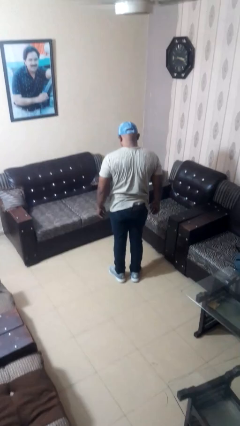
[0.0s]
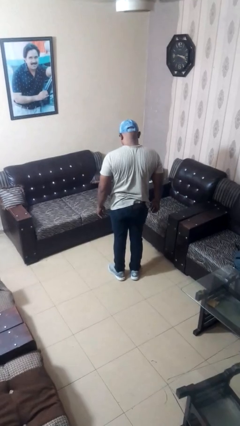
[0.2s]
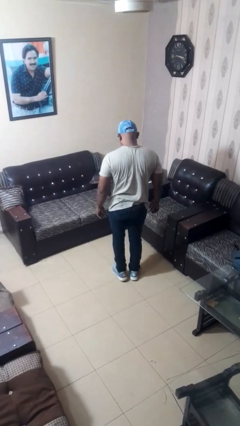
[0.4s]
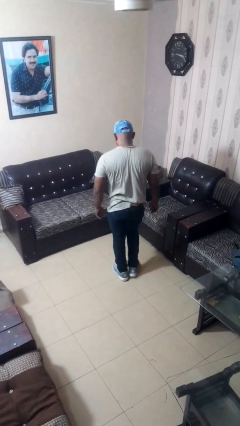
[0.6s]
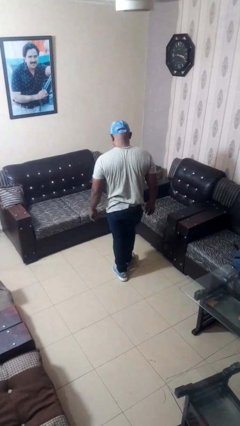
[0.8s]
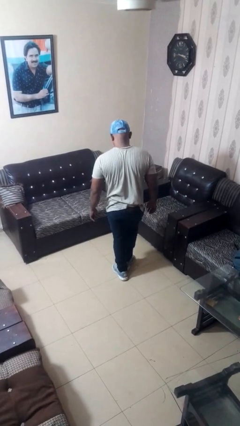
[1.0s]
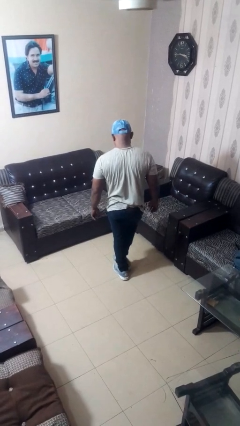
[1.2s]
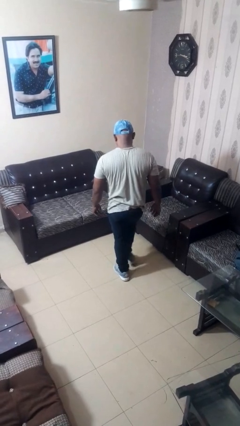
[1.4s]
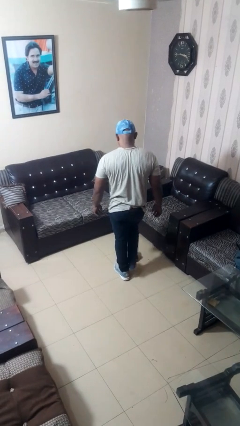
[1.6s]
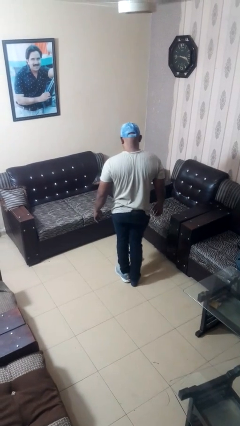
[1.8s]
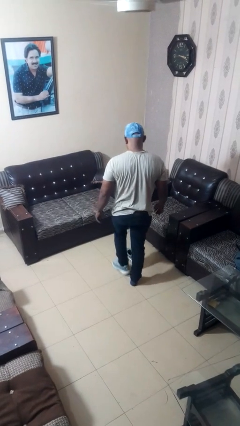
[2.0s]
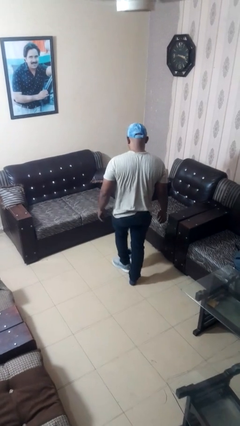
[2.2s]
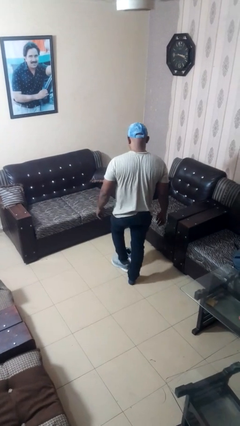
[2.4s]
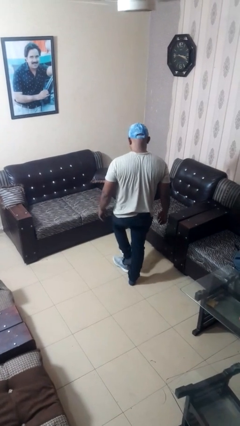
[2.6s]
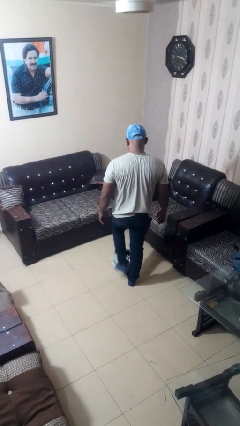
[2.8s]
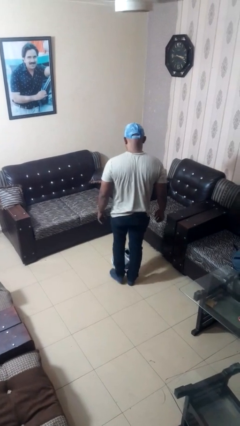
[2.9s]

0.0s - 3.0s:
person takes off shoes

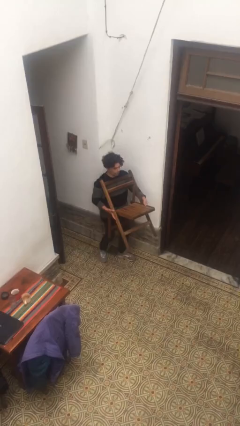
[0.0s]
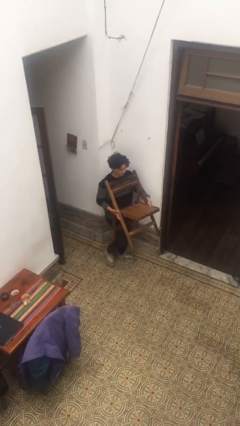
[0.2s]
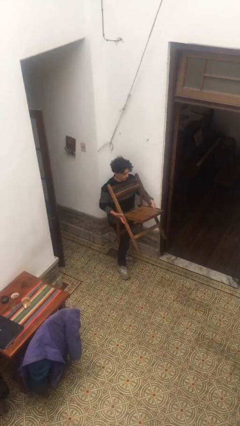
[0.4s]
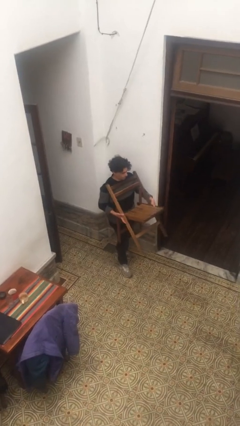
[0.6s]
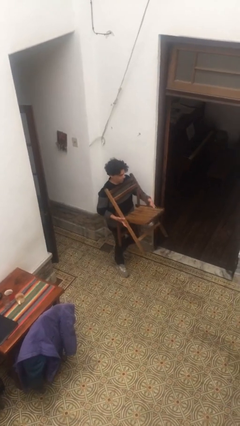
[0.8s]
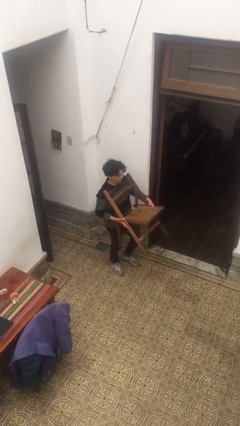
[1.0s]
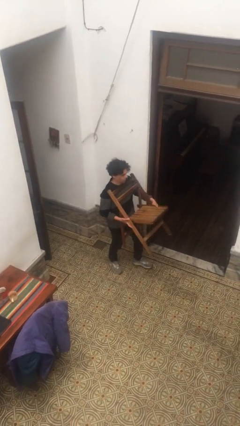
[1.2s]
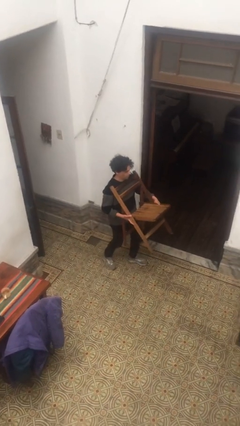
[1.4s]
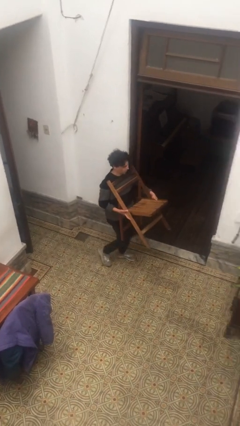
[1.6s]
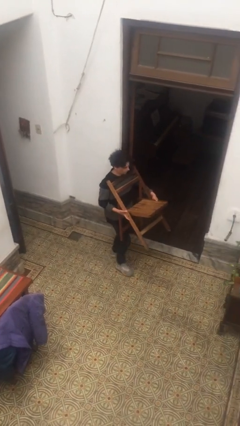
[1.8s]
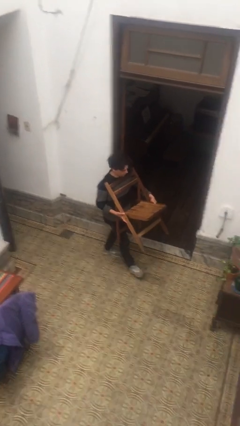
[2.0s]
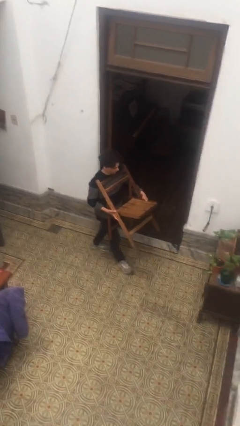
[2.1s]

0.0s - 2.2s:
person carries heavy object

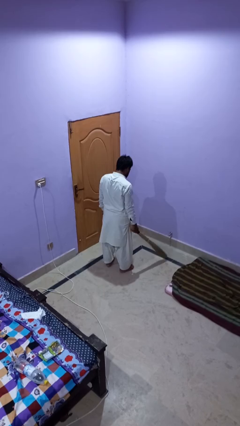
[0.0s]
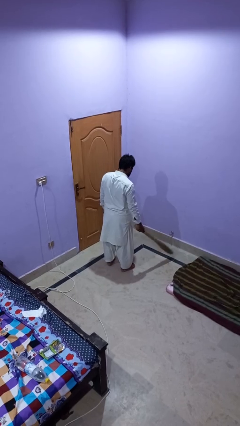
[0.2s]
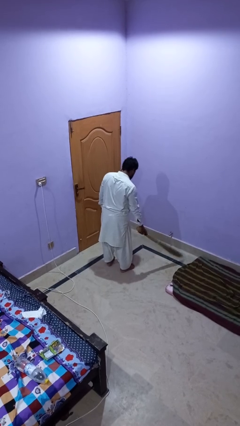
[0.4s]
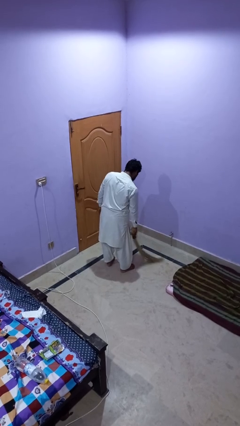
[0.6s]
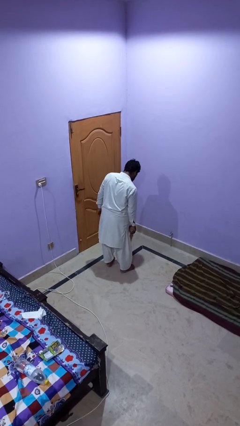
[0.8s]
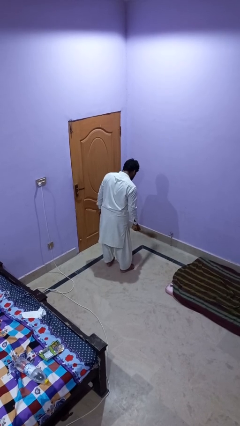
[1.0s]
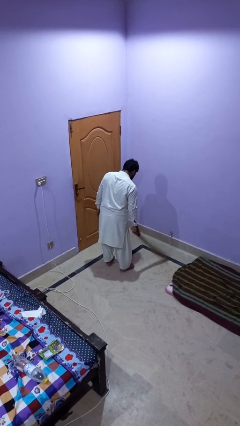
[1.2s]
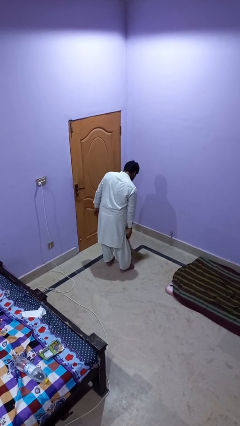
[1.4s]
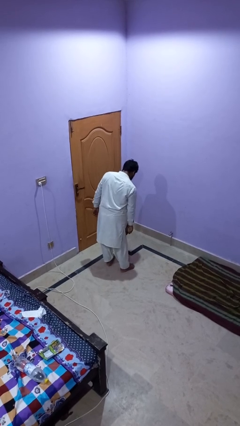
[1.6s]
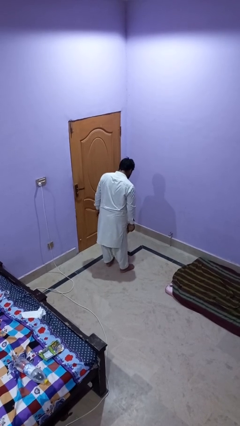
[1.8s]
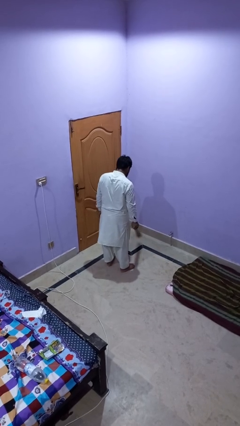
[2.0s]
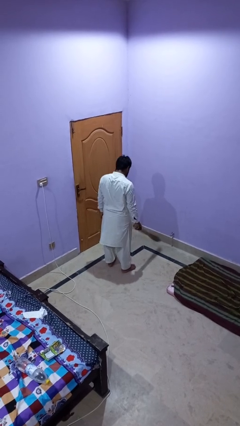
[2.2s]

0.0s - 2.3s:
person sweeps floor

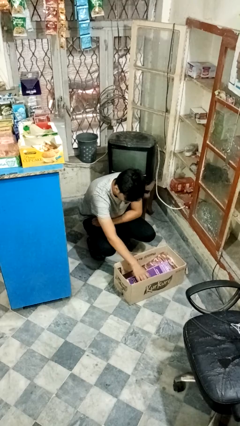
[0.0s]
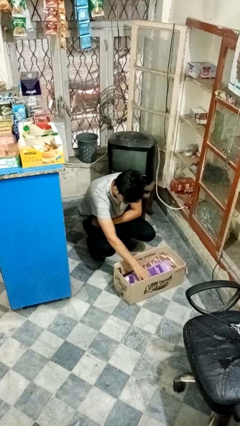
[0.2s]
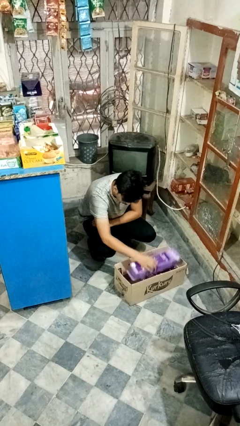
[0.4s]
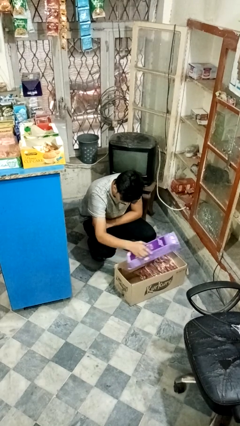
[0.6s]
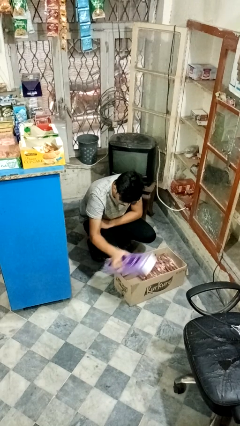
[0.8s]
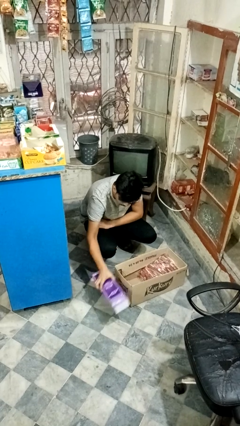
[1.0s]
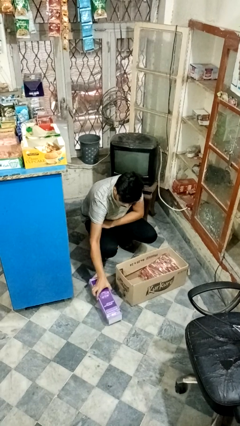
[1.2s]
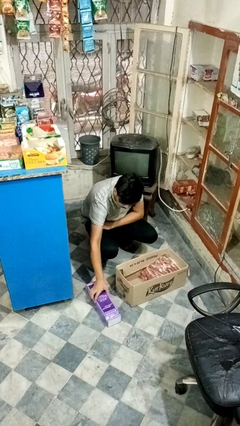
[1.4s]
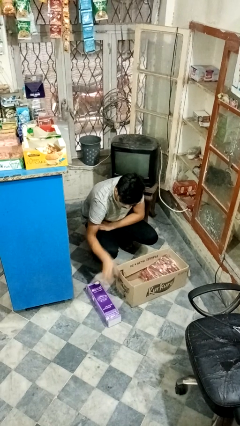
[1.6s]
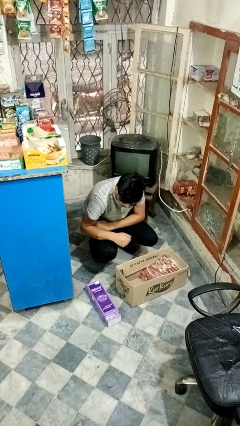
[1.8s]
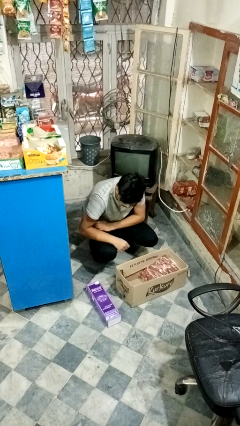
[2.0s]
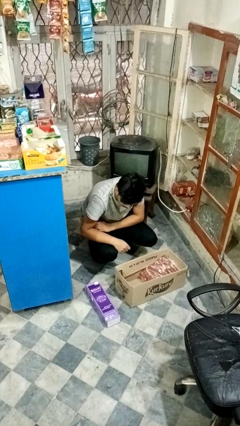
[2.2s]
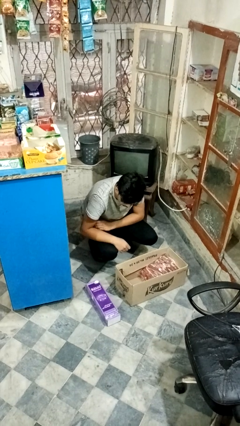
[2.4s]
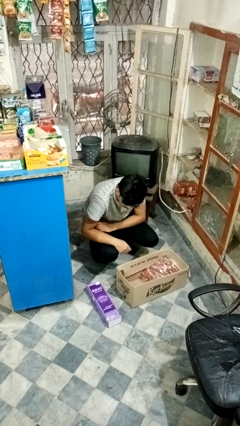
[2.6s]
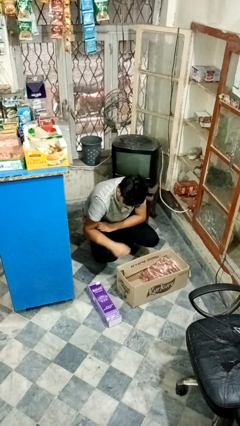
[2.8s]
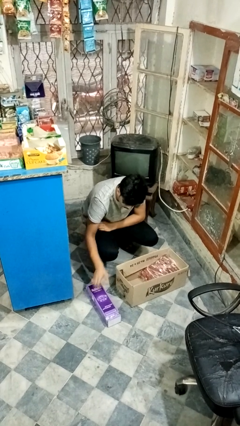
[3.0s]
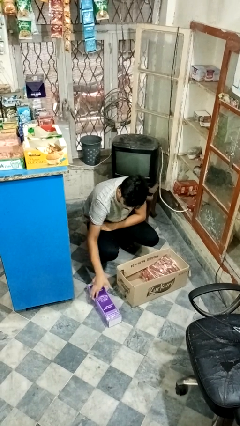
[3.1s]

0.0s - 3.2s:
person takes object from box

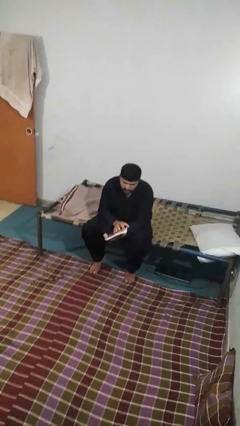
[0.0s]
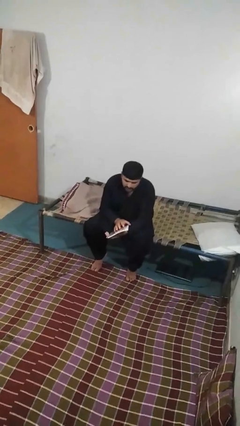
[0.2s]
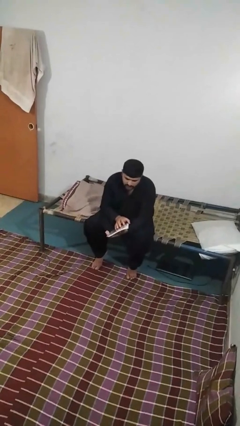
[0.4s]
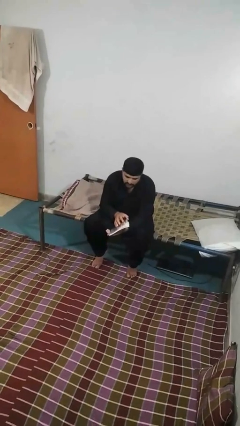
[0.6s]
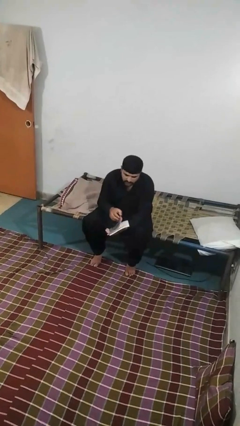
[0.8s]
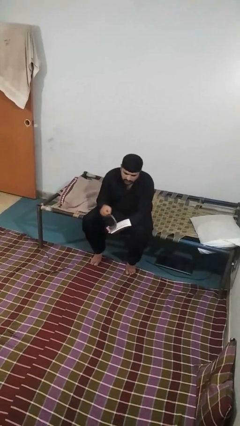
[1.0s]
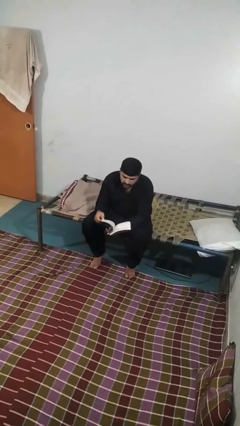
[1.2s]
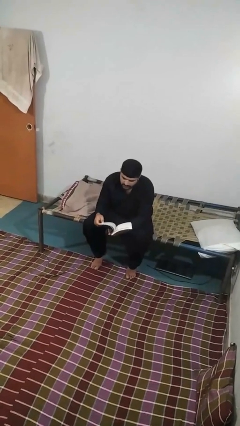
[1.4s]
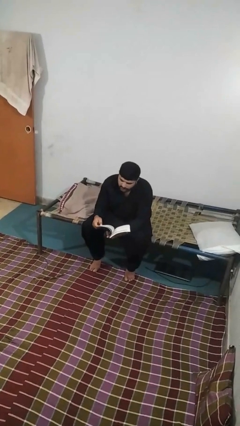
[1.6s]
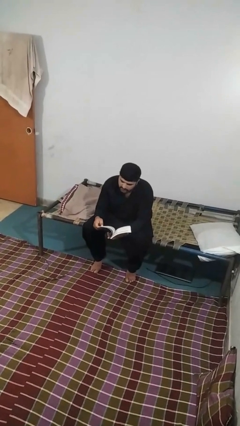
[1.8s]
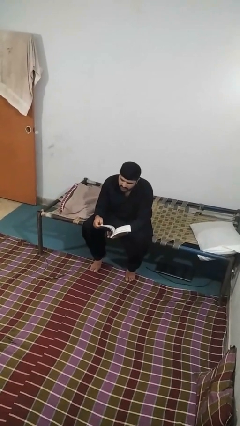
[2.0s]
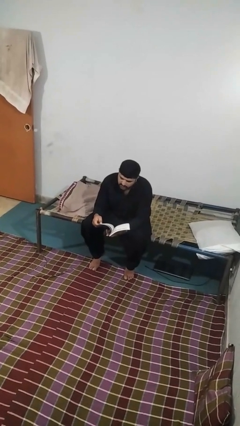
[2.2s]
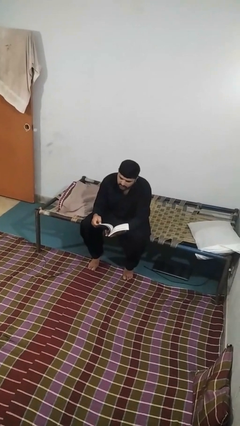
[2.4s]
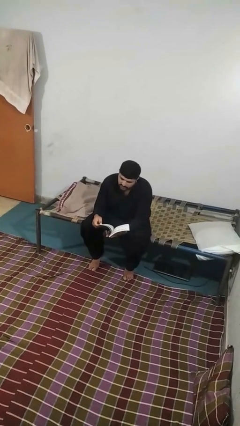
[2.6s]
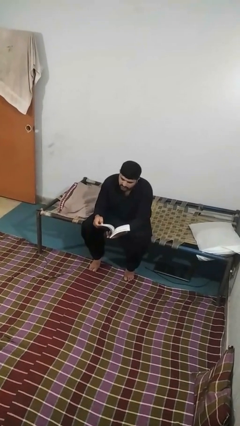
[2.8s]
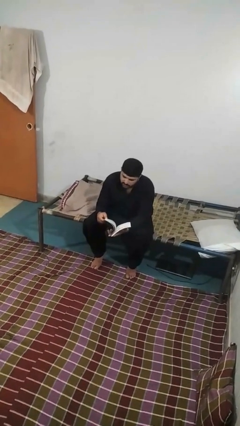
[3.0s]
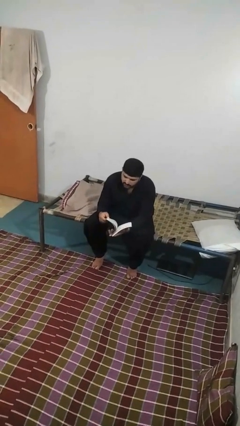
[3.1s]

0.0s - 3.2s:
person reads book

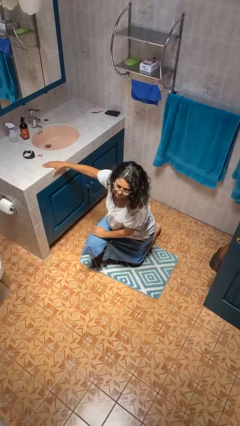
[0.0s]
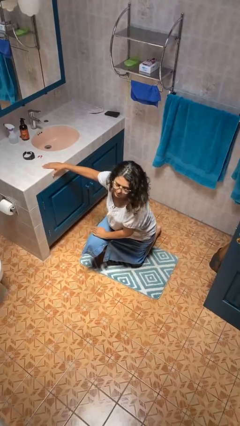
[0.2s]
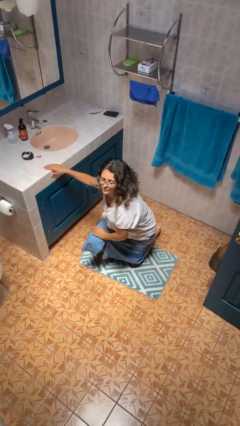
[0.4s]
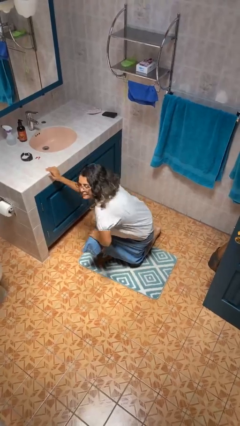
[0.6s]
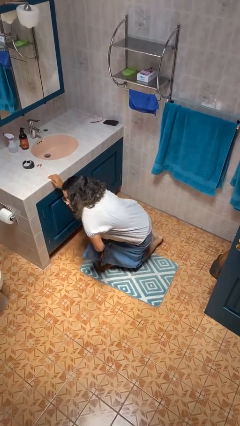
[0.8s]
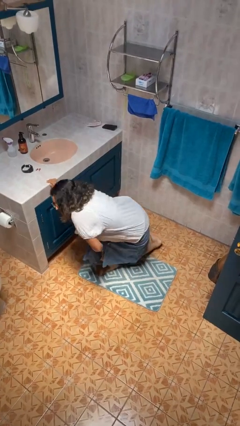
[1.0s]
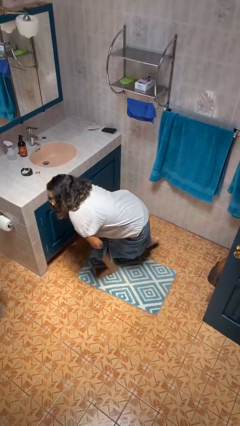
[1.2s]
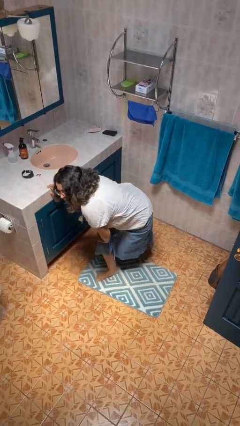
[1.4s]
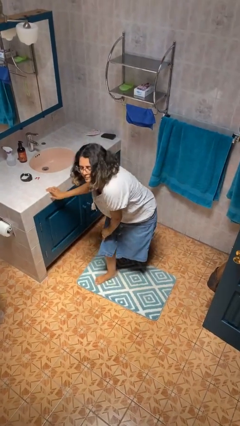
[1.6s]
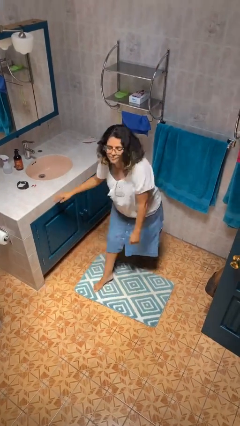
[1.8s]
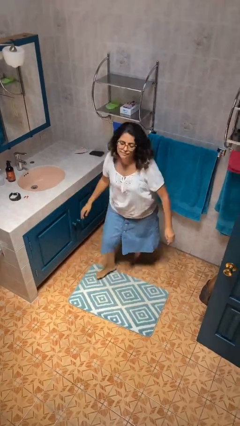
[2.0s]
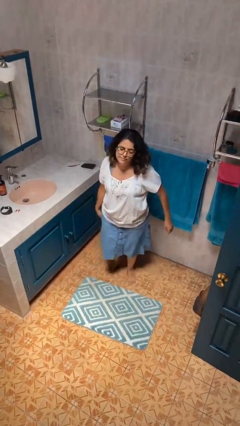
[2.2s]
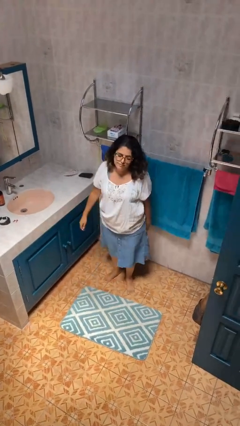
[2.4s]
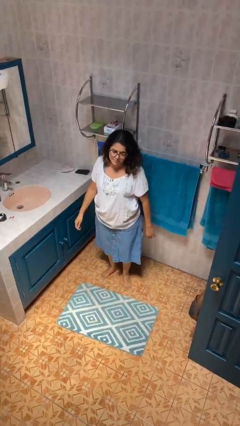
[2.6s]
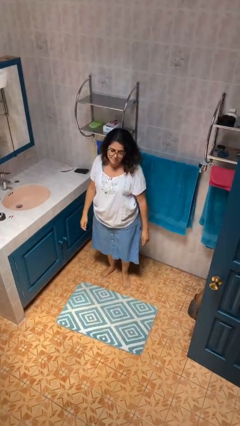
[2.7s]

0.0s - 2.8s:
person stands up from floor

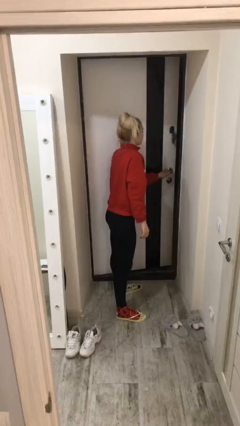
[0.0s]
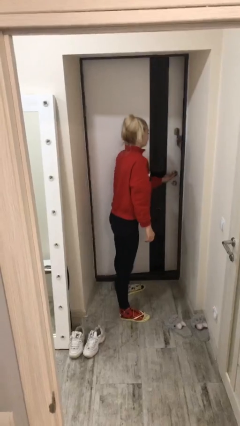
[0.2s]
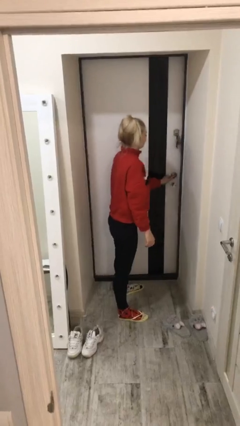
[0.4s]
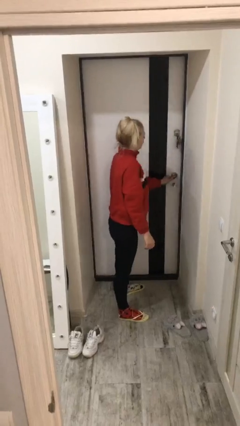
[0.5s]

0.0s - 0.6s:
person closes facility door

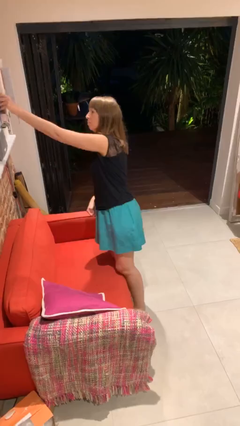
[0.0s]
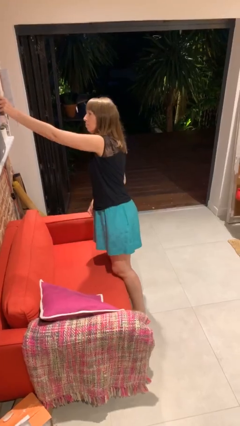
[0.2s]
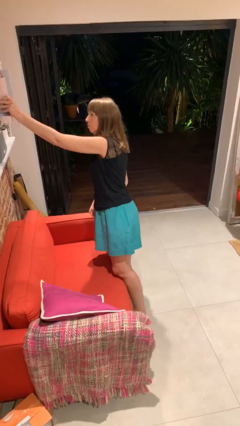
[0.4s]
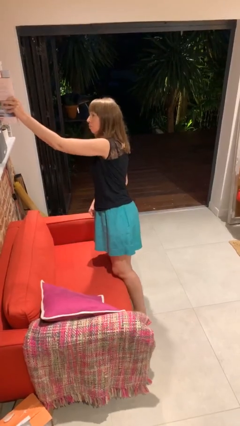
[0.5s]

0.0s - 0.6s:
person picks up object from shelf
